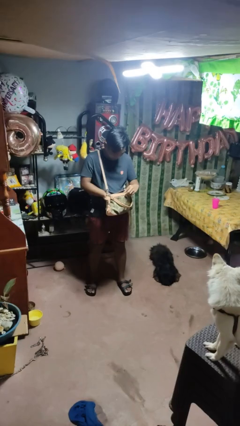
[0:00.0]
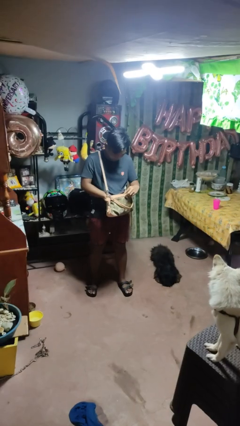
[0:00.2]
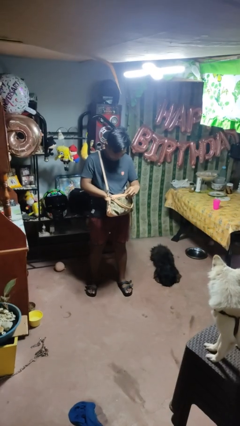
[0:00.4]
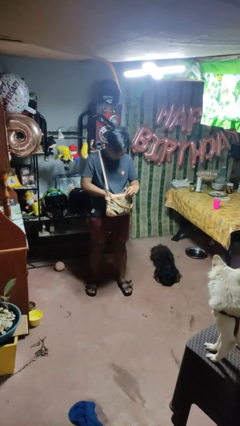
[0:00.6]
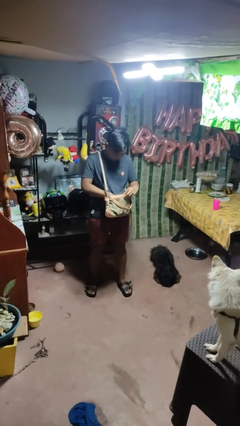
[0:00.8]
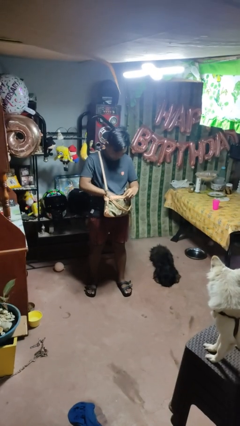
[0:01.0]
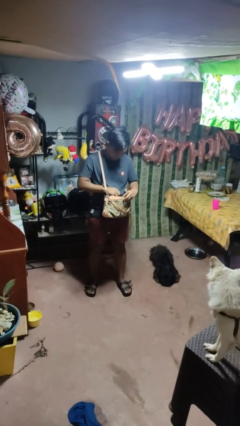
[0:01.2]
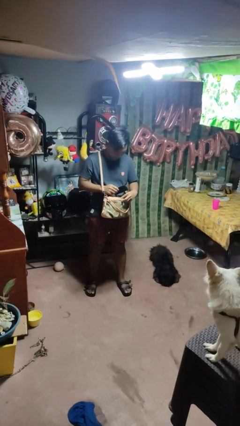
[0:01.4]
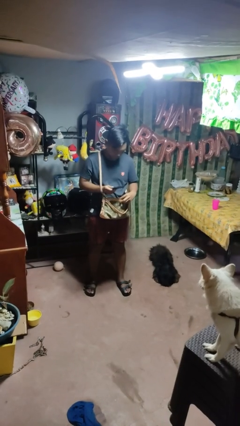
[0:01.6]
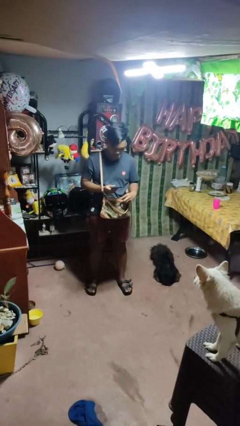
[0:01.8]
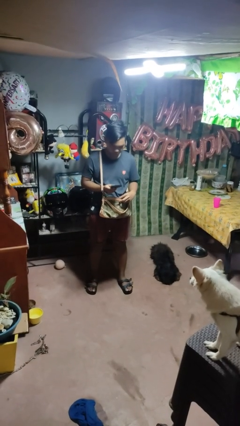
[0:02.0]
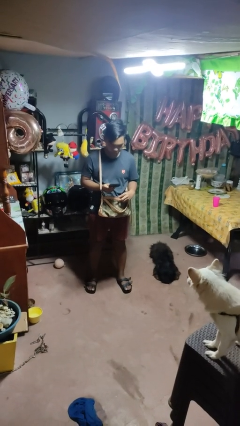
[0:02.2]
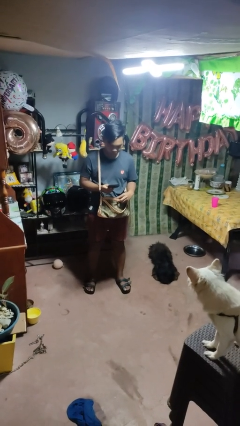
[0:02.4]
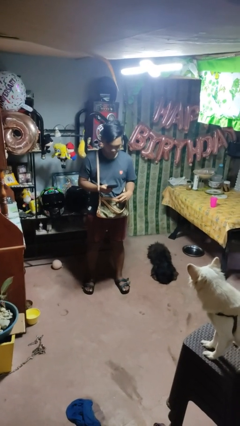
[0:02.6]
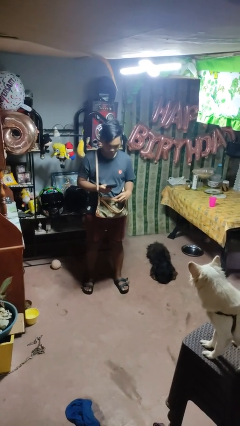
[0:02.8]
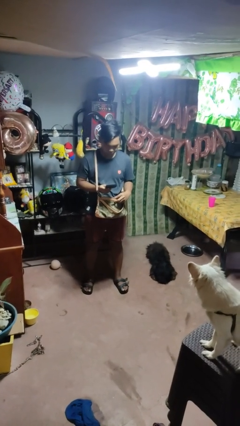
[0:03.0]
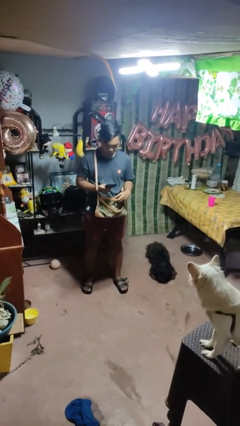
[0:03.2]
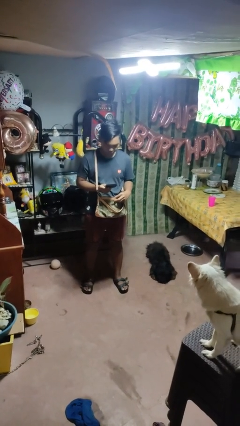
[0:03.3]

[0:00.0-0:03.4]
person takes object from purse

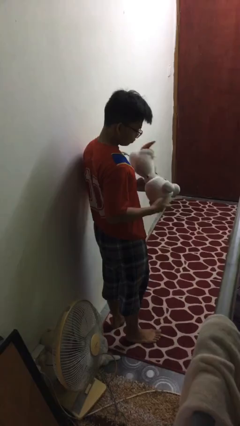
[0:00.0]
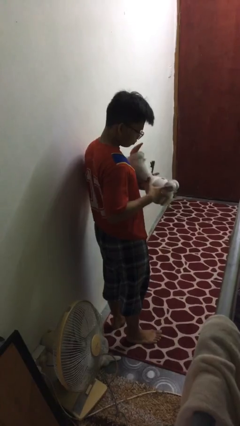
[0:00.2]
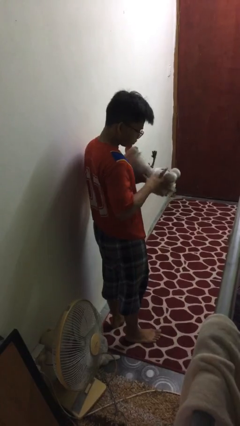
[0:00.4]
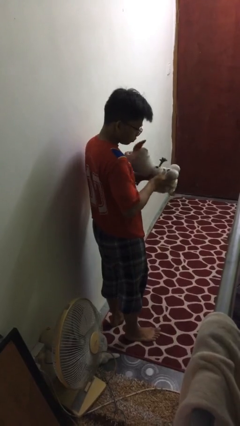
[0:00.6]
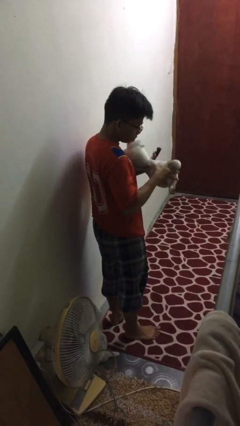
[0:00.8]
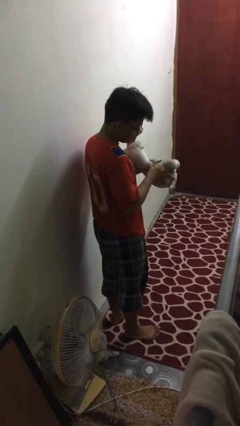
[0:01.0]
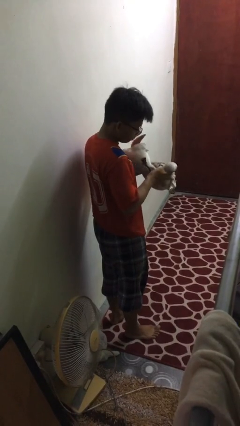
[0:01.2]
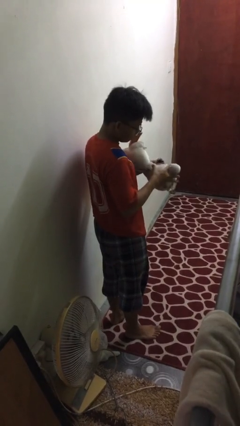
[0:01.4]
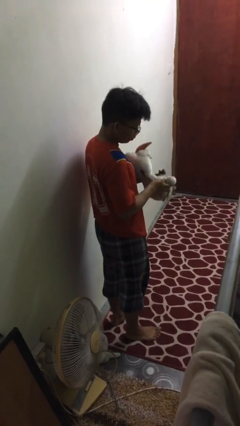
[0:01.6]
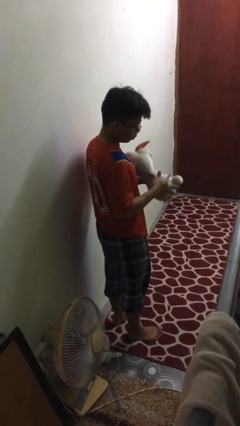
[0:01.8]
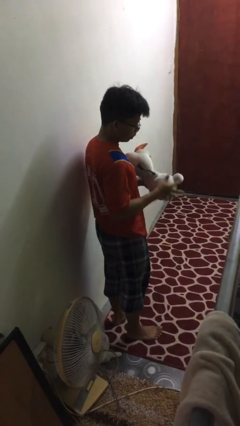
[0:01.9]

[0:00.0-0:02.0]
person squeezes object

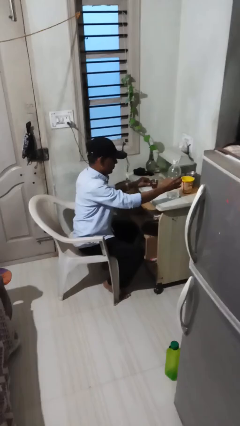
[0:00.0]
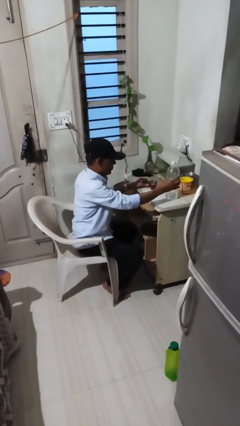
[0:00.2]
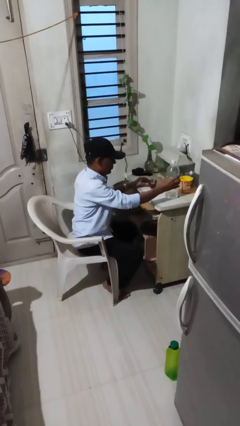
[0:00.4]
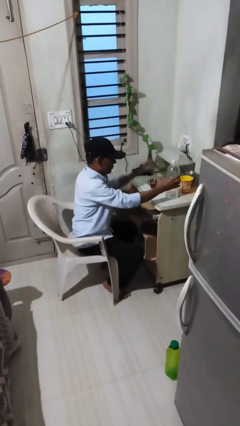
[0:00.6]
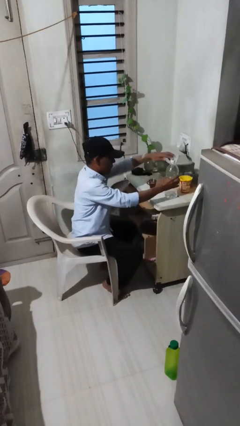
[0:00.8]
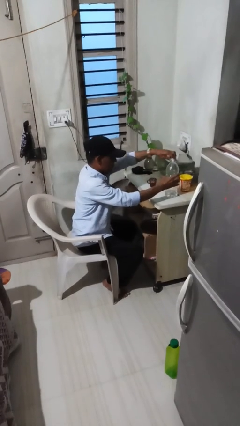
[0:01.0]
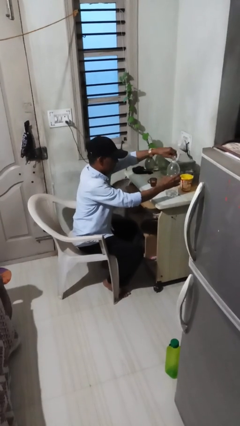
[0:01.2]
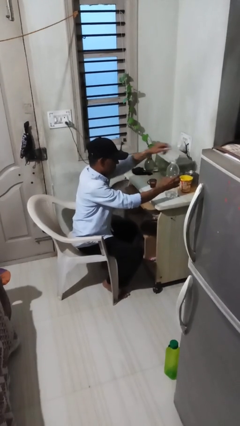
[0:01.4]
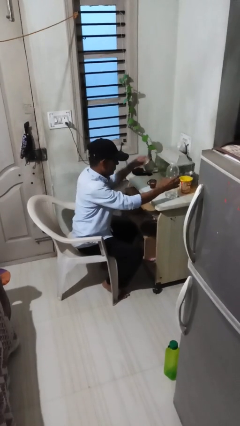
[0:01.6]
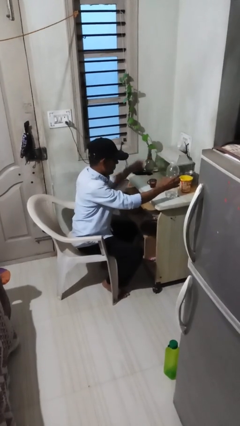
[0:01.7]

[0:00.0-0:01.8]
person unscrews lid from bottle

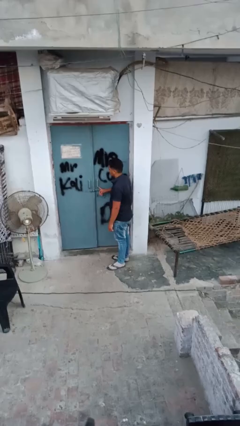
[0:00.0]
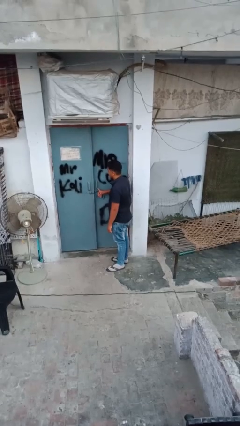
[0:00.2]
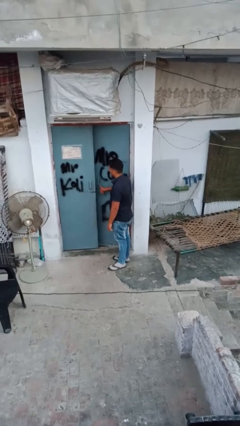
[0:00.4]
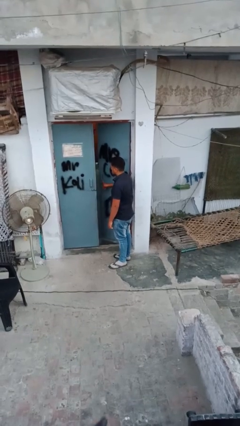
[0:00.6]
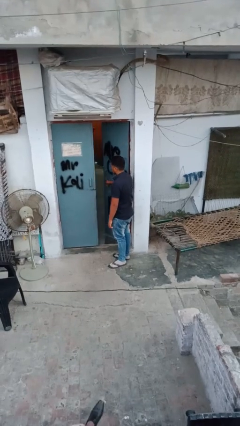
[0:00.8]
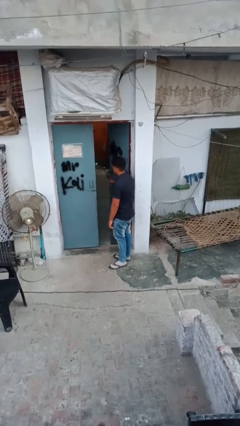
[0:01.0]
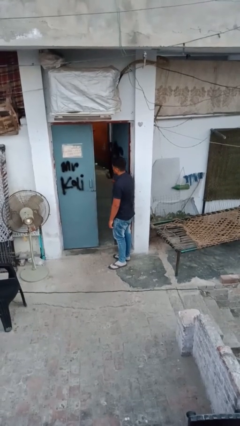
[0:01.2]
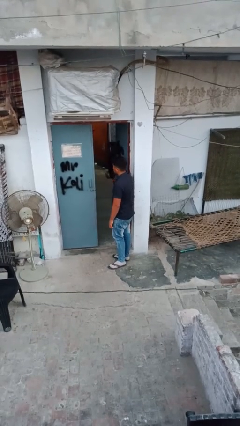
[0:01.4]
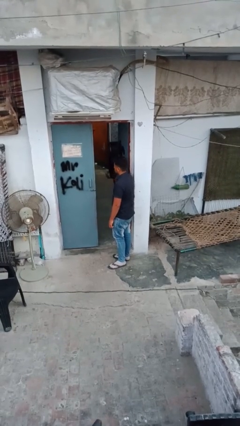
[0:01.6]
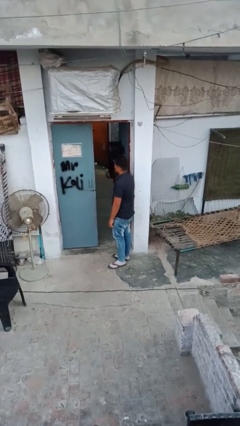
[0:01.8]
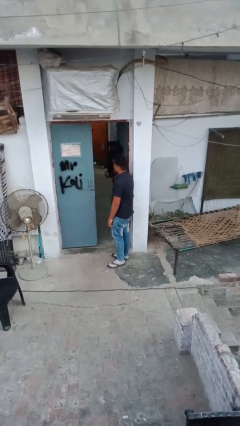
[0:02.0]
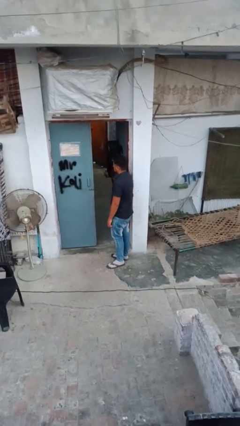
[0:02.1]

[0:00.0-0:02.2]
person opens facility door

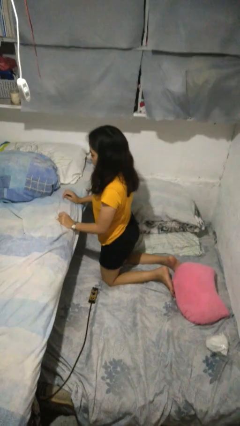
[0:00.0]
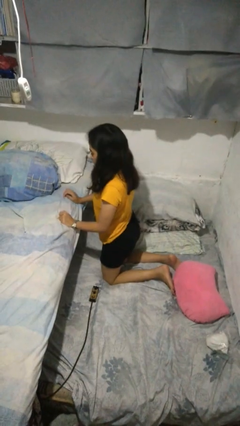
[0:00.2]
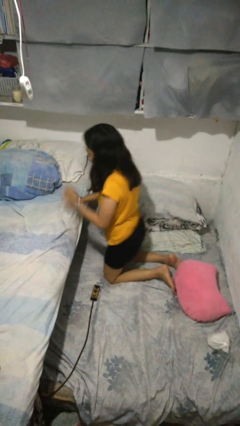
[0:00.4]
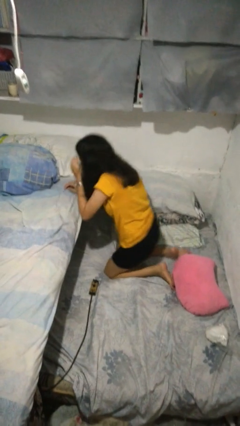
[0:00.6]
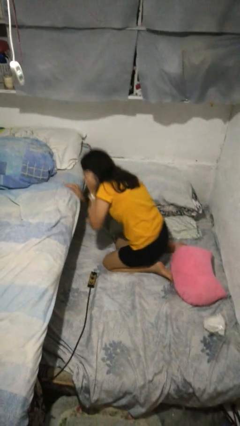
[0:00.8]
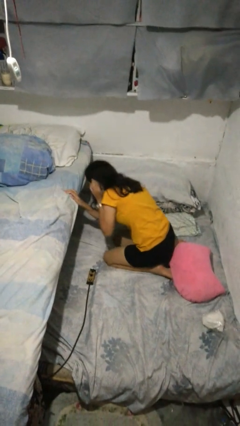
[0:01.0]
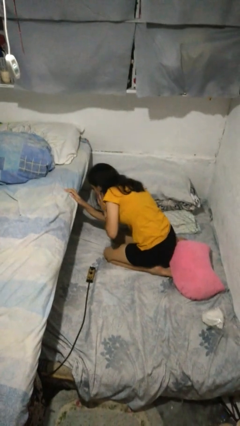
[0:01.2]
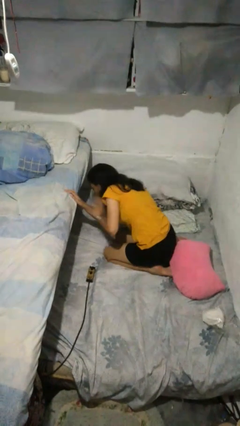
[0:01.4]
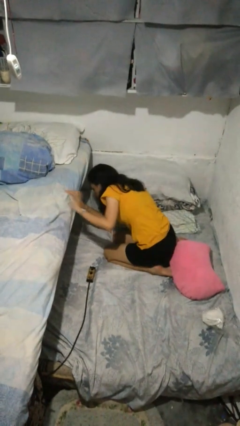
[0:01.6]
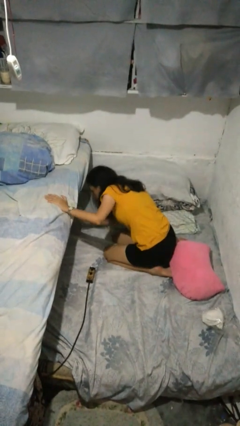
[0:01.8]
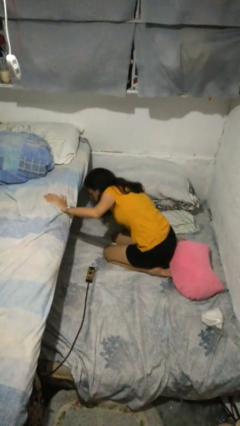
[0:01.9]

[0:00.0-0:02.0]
person searches under bed

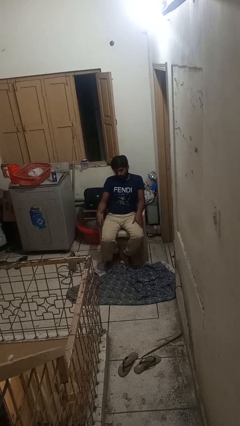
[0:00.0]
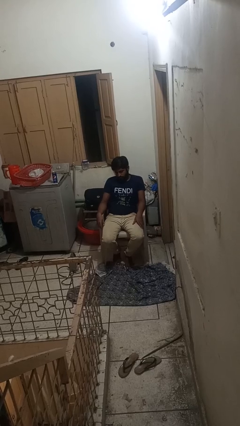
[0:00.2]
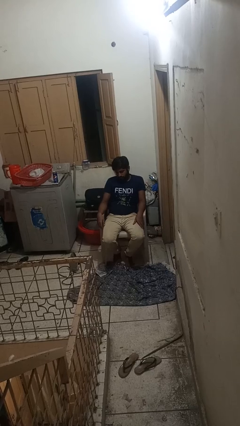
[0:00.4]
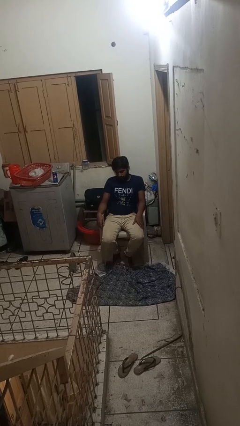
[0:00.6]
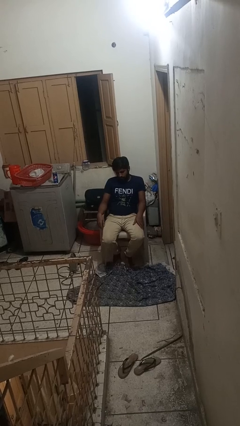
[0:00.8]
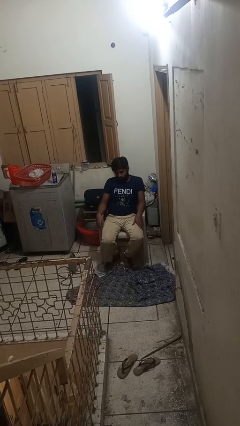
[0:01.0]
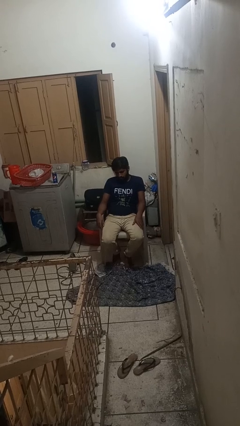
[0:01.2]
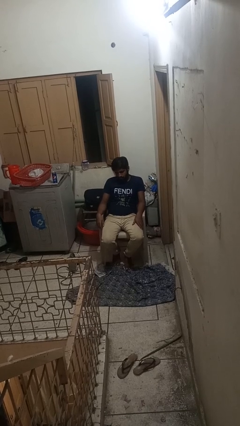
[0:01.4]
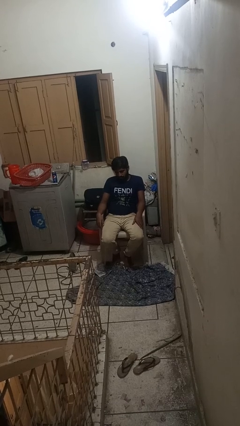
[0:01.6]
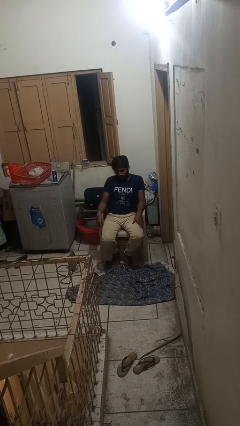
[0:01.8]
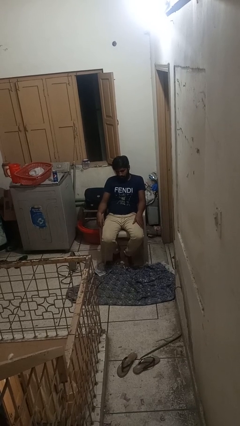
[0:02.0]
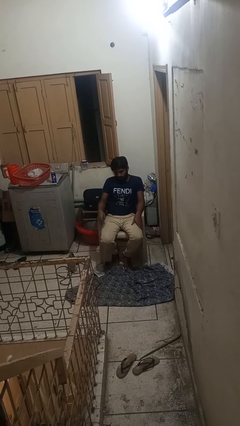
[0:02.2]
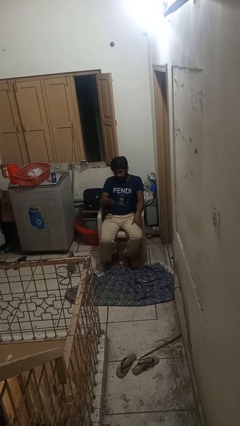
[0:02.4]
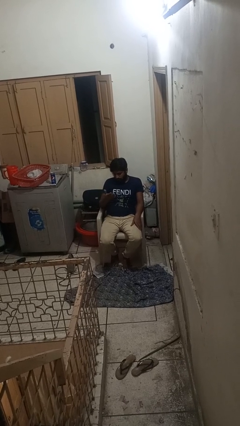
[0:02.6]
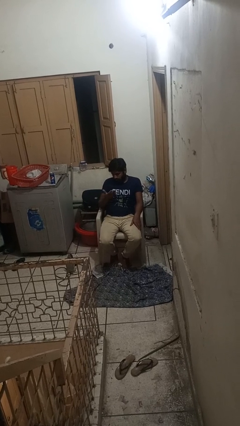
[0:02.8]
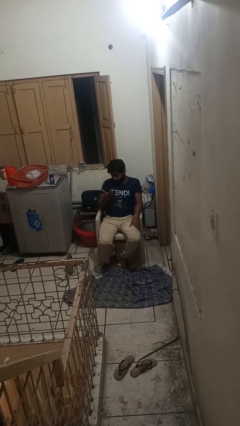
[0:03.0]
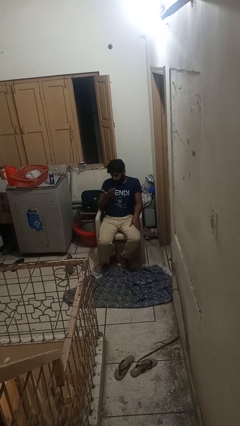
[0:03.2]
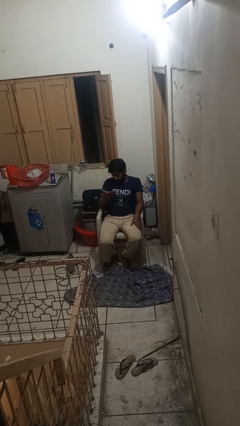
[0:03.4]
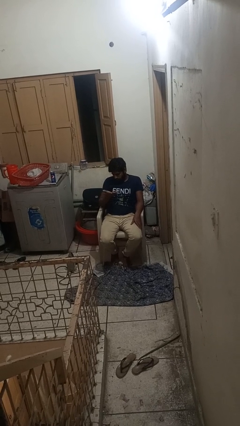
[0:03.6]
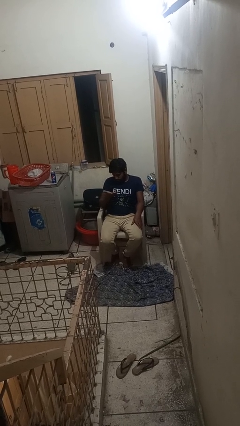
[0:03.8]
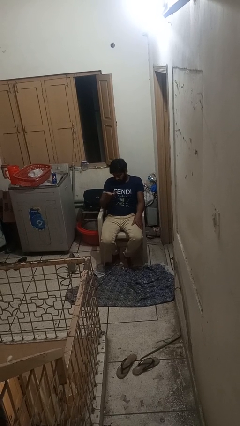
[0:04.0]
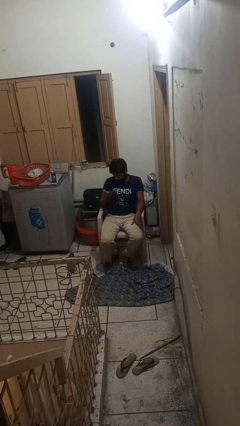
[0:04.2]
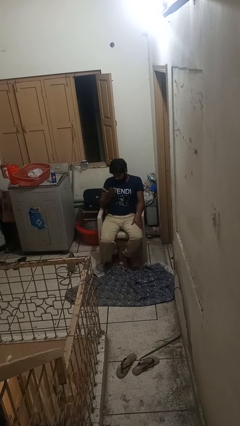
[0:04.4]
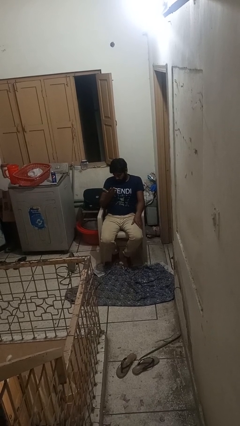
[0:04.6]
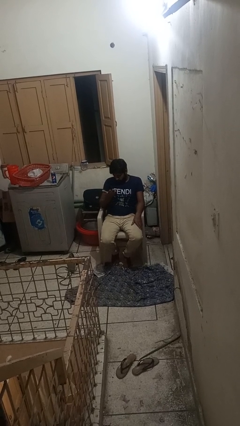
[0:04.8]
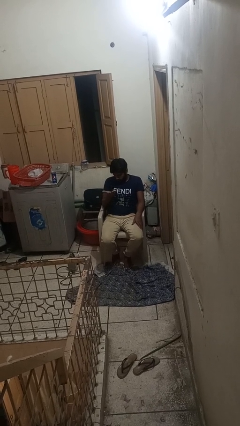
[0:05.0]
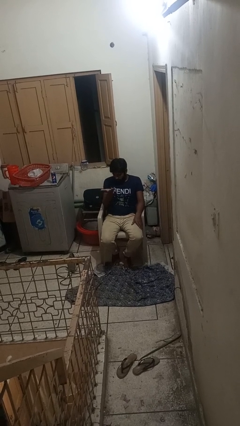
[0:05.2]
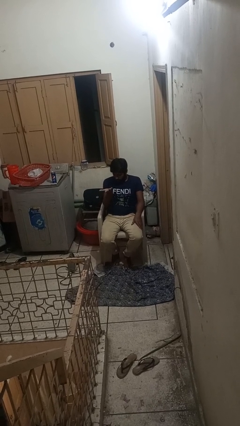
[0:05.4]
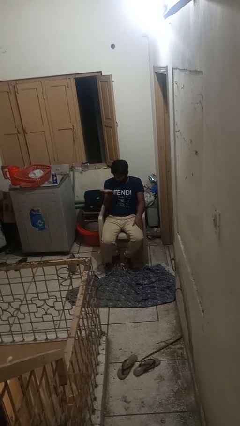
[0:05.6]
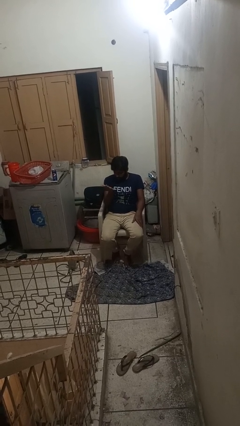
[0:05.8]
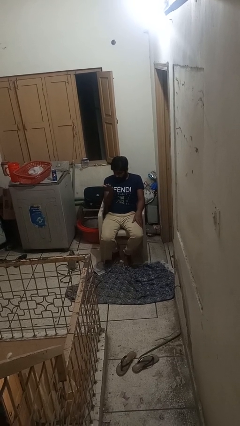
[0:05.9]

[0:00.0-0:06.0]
person looks at hands in lap
